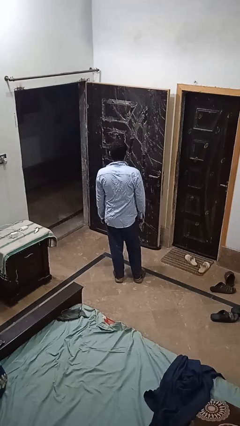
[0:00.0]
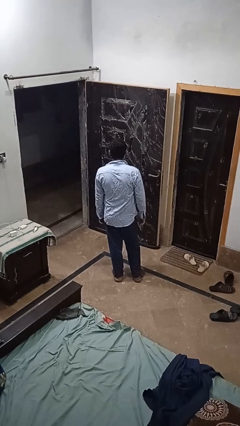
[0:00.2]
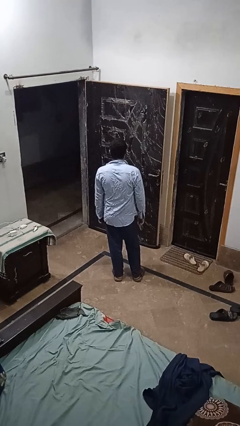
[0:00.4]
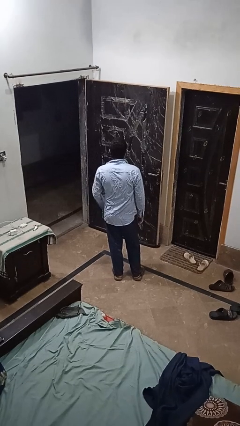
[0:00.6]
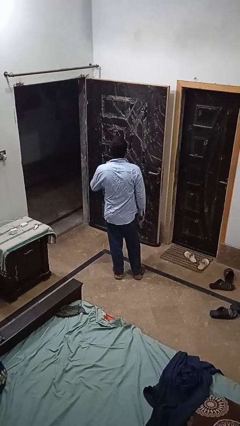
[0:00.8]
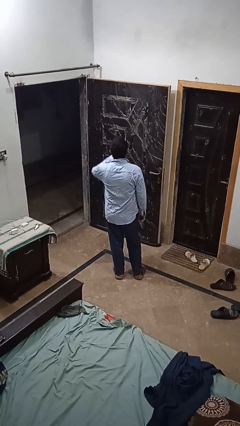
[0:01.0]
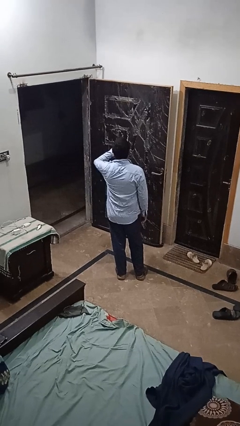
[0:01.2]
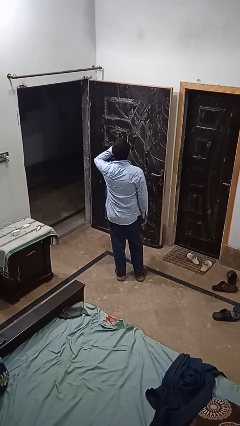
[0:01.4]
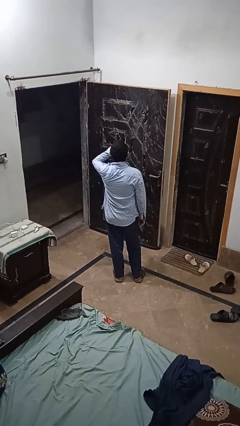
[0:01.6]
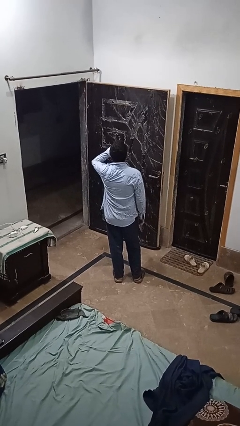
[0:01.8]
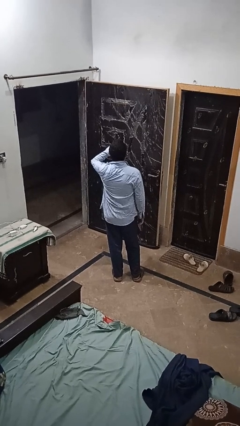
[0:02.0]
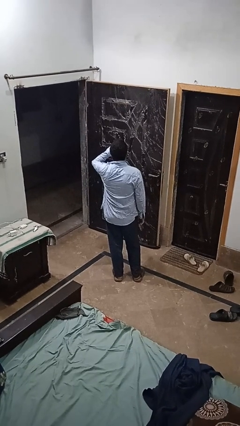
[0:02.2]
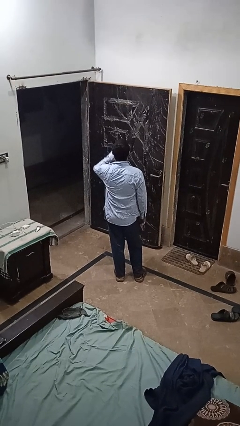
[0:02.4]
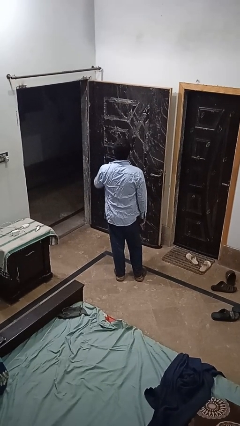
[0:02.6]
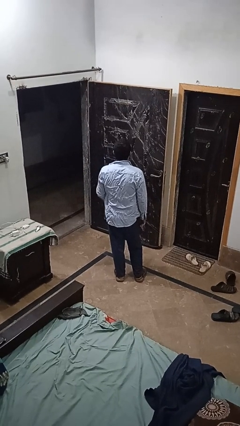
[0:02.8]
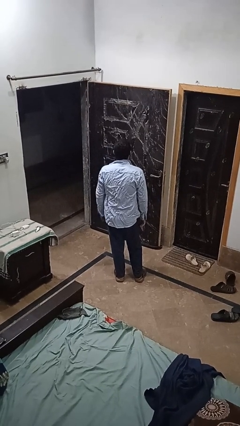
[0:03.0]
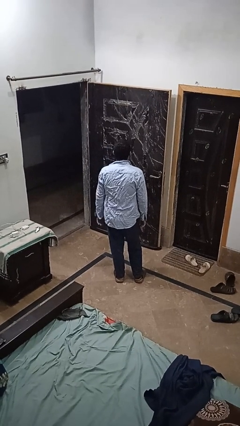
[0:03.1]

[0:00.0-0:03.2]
person yawns

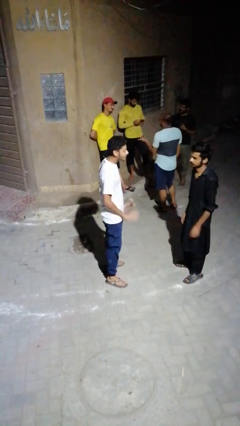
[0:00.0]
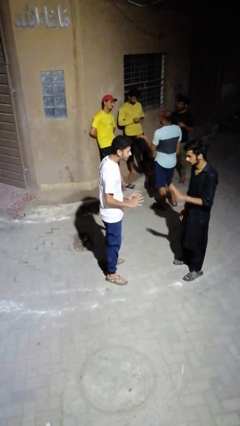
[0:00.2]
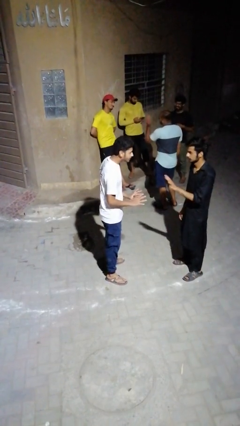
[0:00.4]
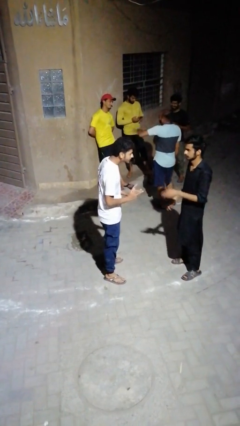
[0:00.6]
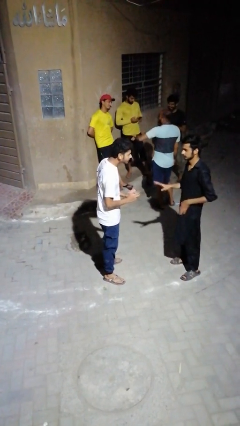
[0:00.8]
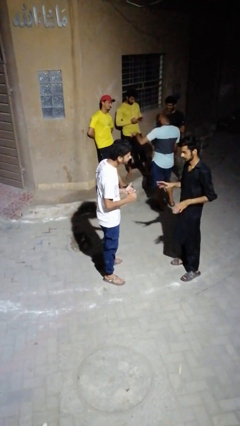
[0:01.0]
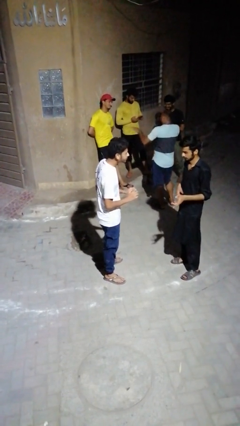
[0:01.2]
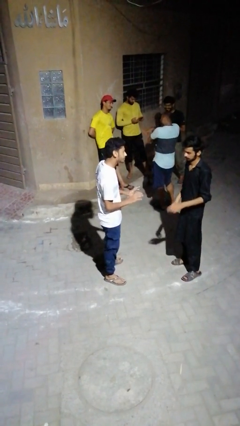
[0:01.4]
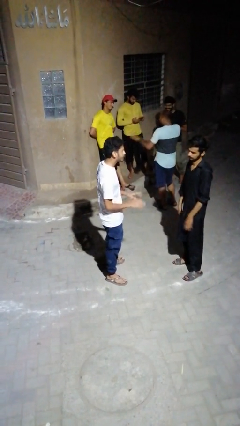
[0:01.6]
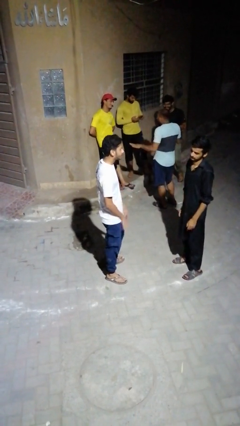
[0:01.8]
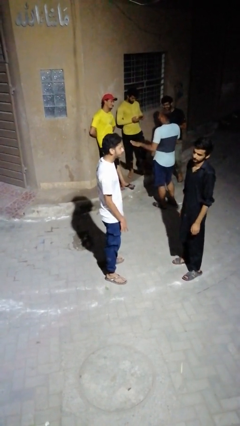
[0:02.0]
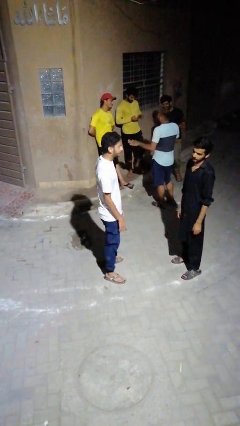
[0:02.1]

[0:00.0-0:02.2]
person talks to person

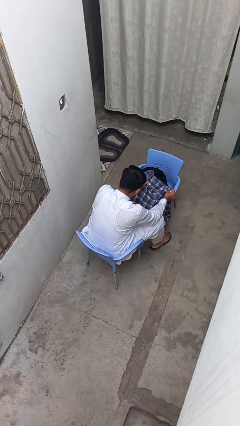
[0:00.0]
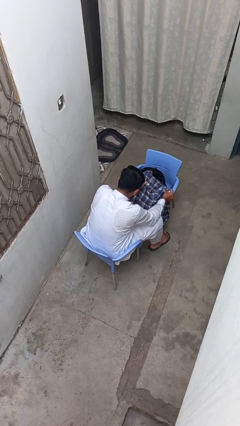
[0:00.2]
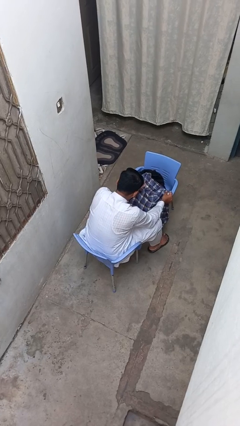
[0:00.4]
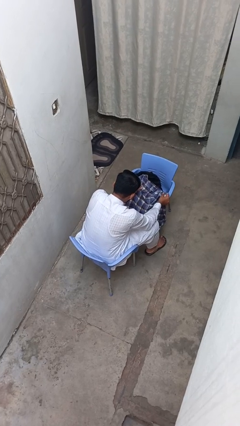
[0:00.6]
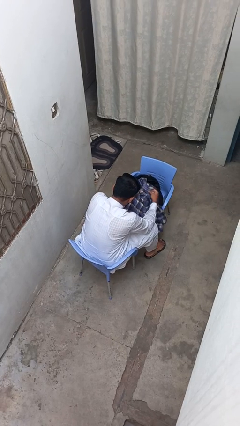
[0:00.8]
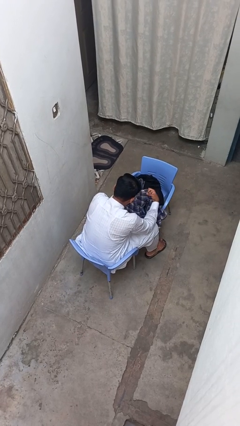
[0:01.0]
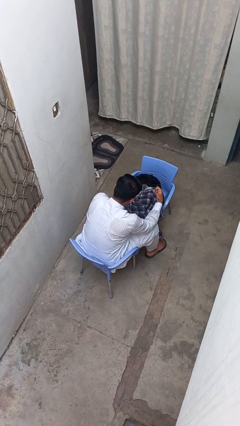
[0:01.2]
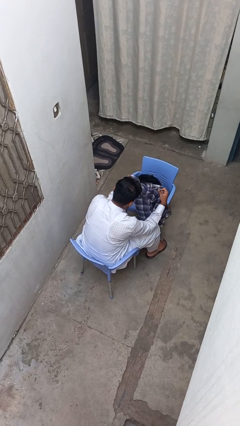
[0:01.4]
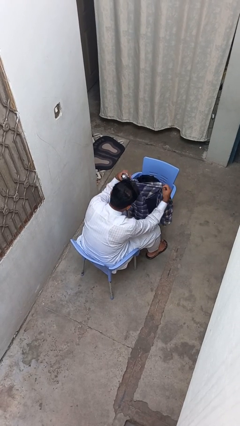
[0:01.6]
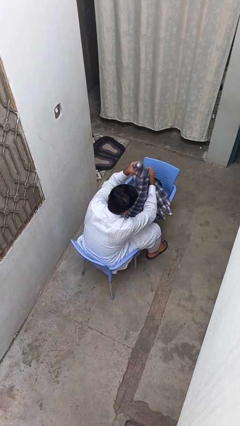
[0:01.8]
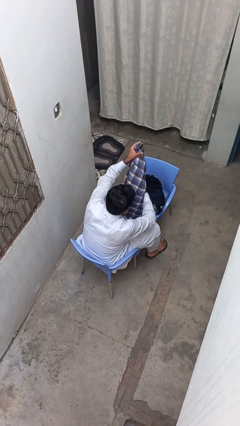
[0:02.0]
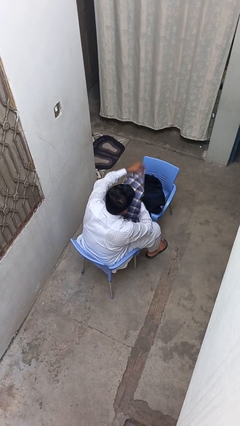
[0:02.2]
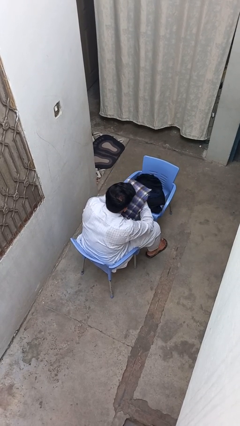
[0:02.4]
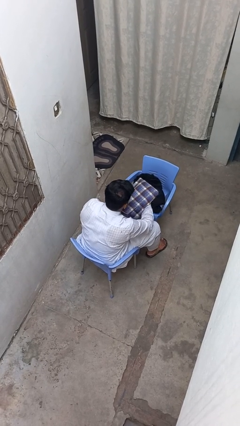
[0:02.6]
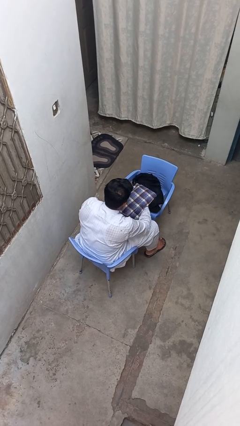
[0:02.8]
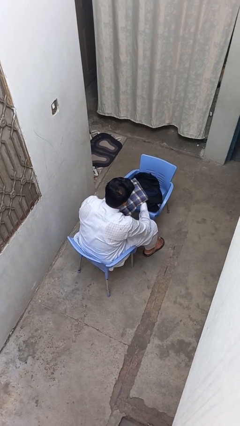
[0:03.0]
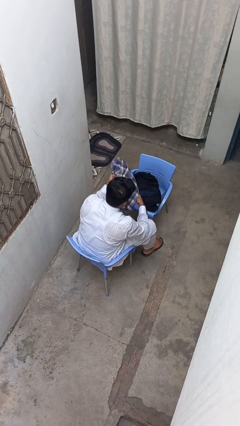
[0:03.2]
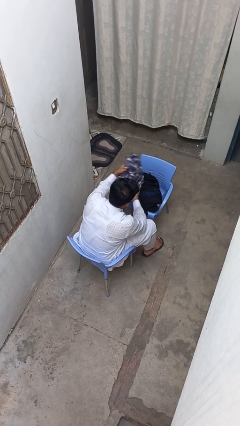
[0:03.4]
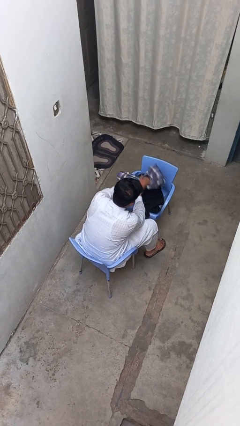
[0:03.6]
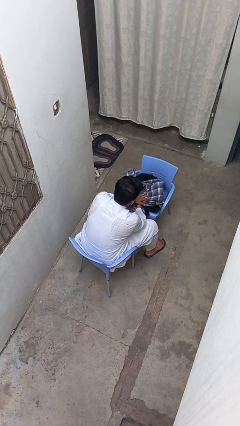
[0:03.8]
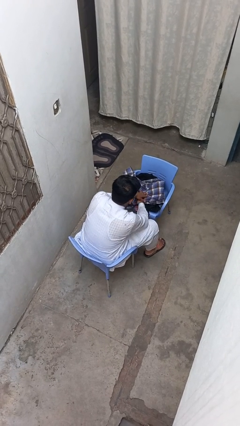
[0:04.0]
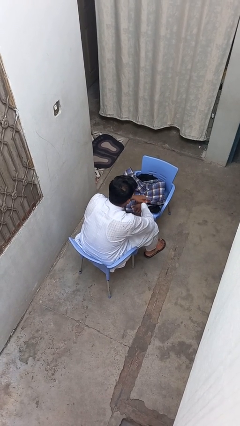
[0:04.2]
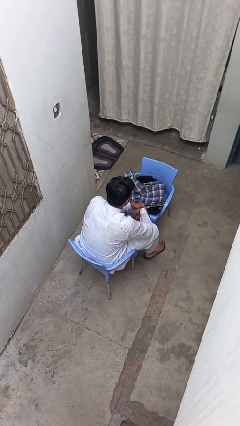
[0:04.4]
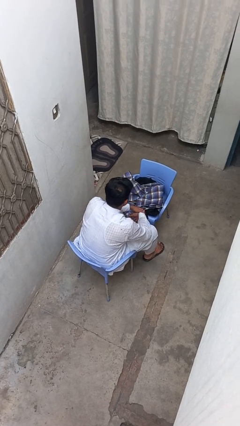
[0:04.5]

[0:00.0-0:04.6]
person folds shirt

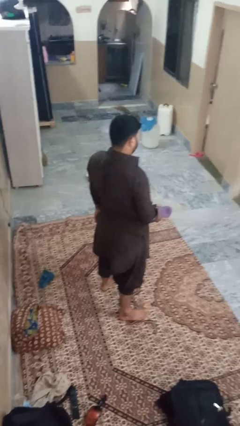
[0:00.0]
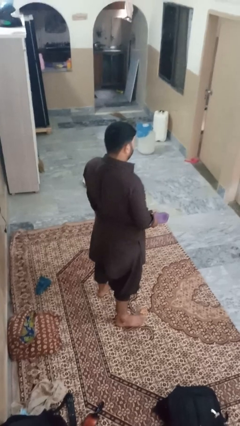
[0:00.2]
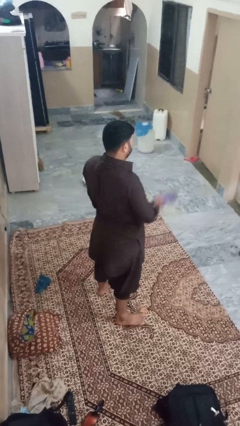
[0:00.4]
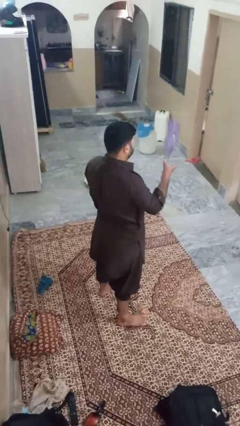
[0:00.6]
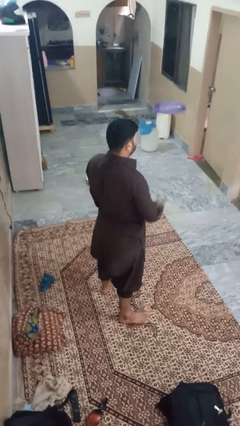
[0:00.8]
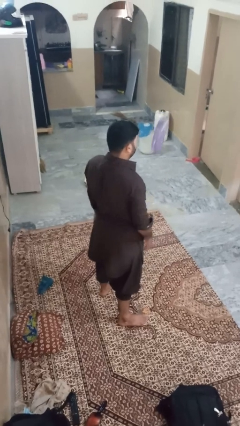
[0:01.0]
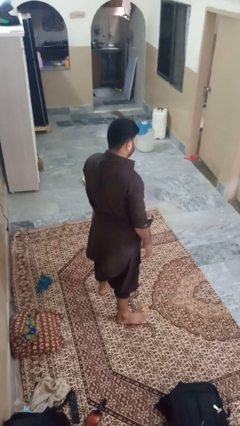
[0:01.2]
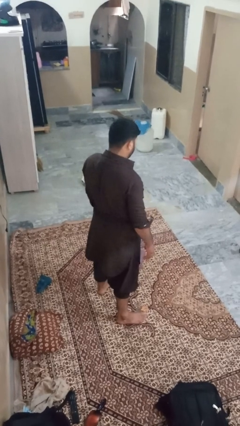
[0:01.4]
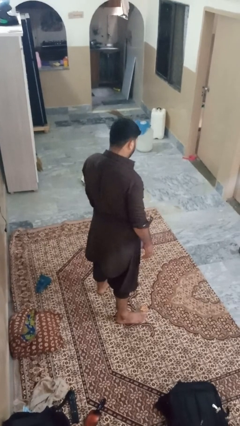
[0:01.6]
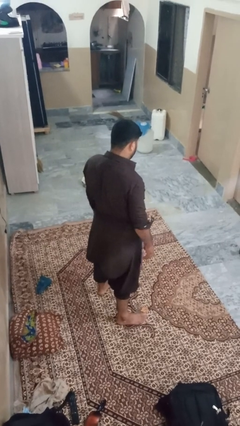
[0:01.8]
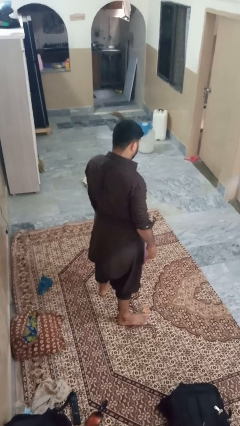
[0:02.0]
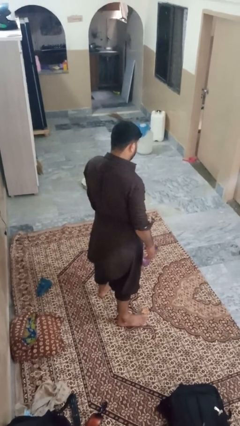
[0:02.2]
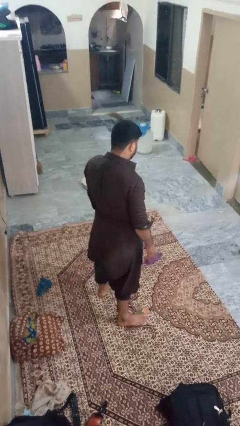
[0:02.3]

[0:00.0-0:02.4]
person throws object into air

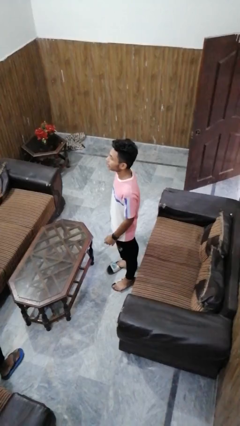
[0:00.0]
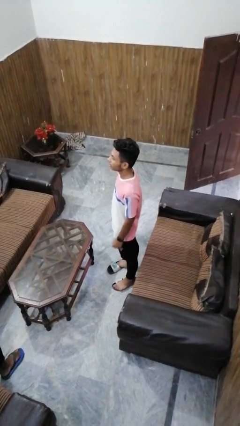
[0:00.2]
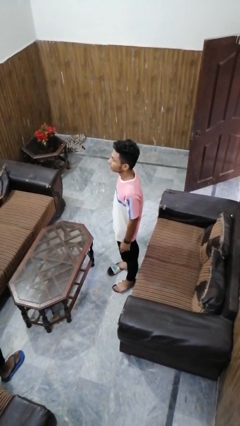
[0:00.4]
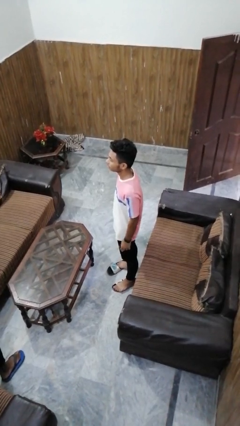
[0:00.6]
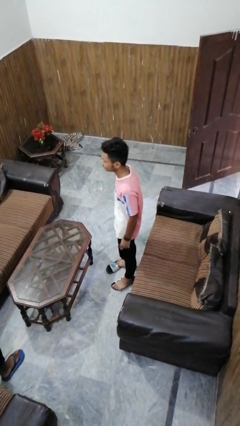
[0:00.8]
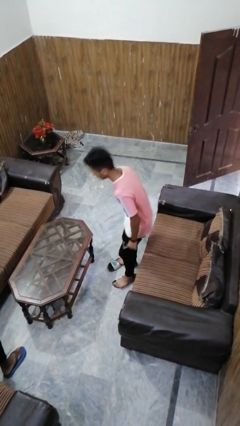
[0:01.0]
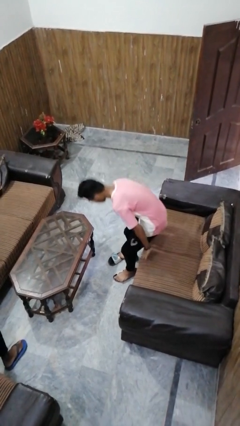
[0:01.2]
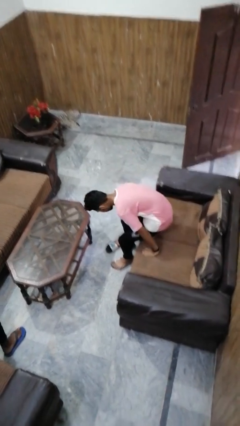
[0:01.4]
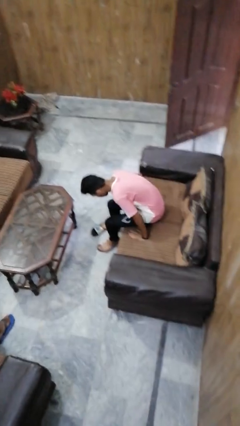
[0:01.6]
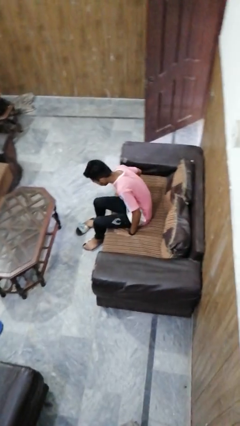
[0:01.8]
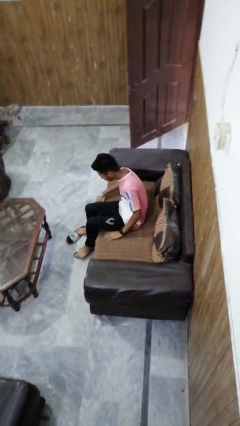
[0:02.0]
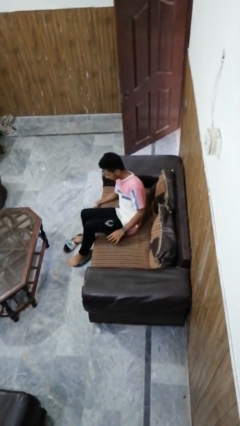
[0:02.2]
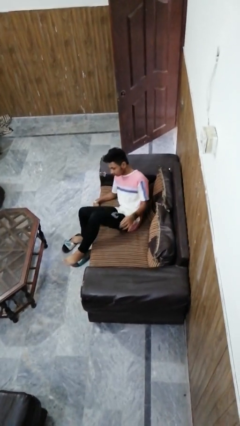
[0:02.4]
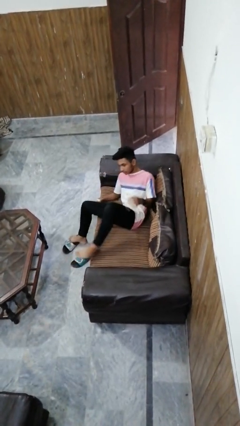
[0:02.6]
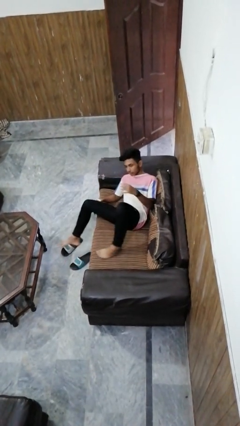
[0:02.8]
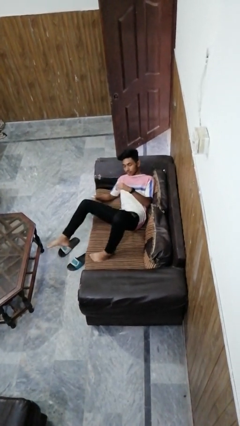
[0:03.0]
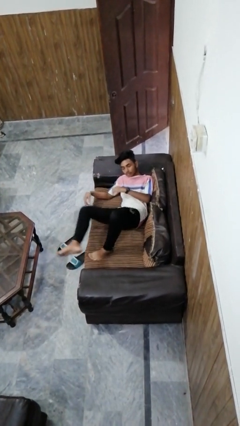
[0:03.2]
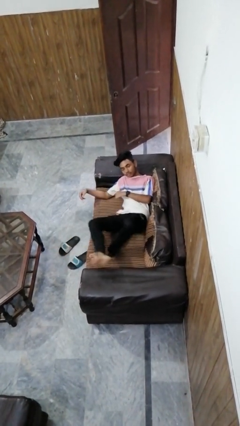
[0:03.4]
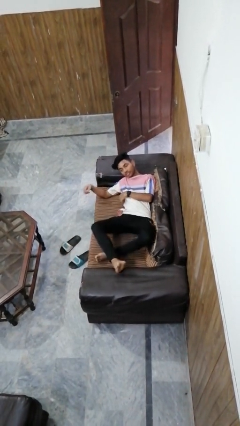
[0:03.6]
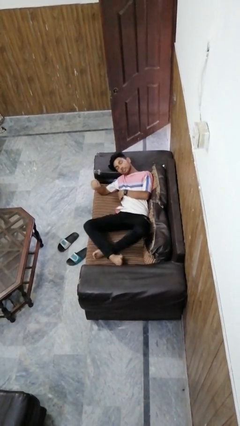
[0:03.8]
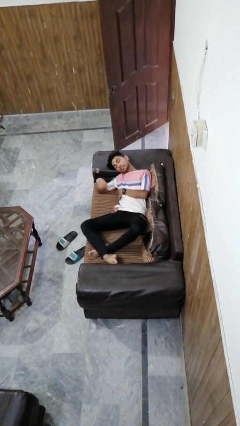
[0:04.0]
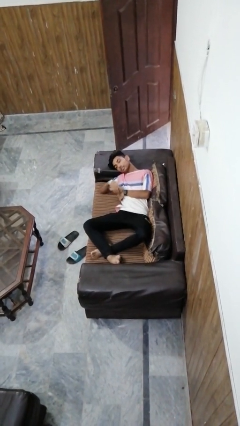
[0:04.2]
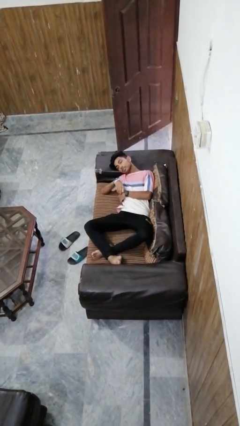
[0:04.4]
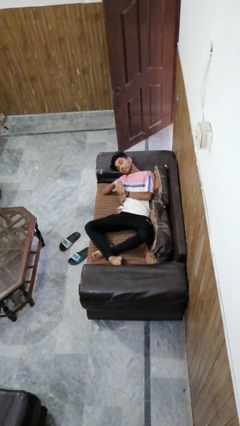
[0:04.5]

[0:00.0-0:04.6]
person lies down on couch

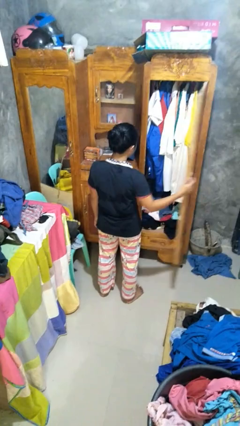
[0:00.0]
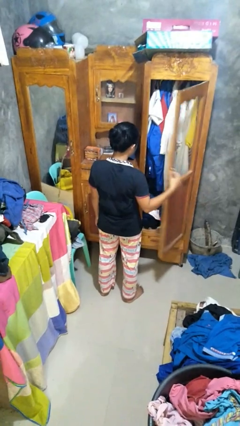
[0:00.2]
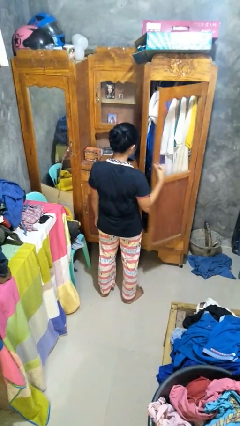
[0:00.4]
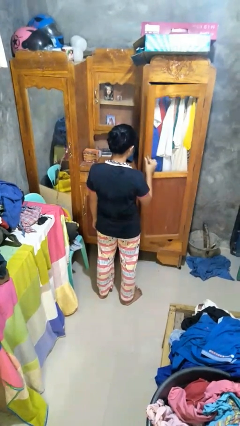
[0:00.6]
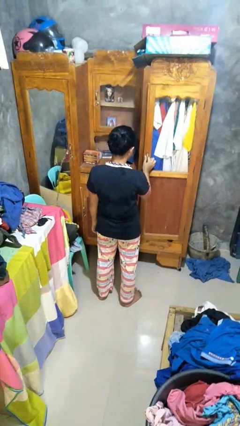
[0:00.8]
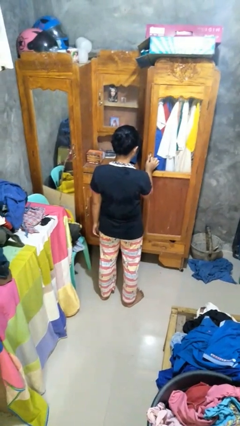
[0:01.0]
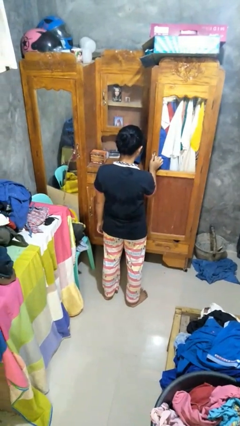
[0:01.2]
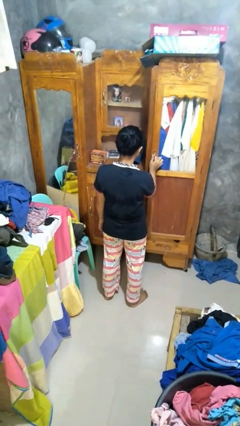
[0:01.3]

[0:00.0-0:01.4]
person closes closet door
